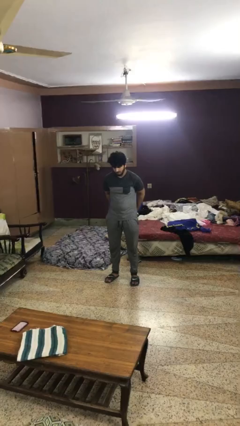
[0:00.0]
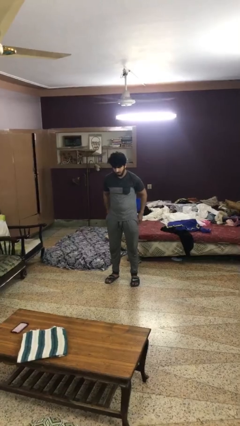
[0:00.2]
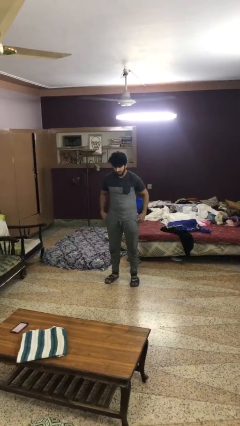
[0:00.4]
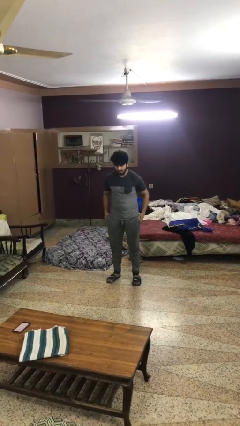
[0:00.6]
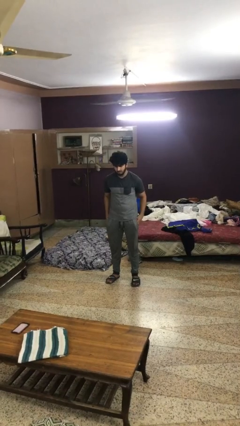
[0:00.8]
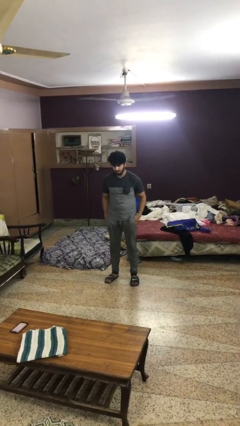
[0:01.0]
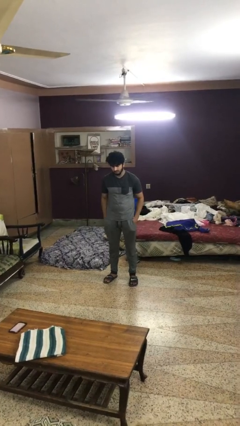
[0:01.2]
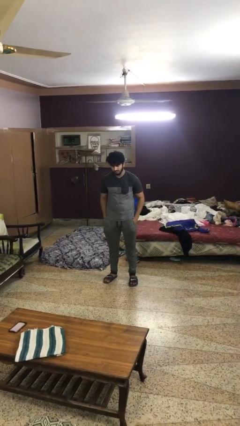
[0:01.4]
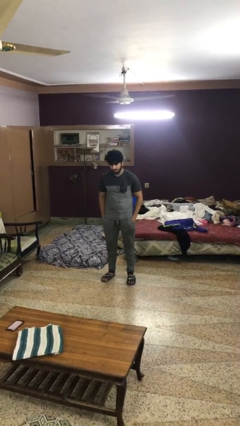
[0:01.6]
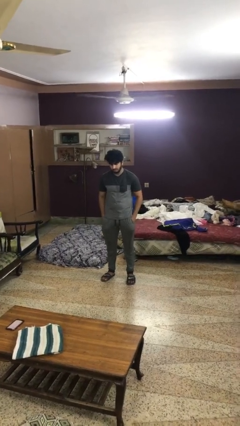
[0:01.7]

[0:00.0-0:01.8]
person puts hands in back pockets

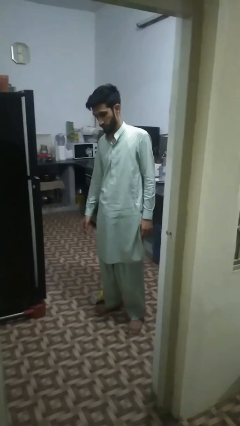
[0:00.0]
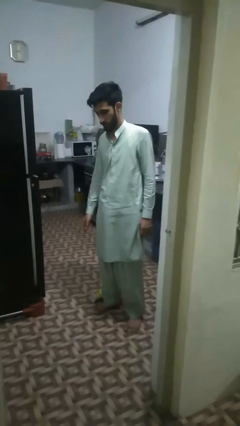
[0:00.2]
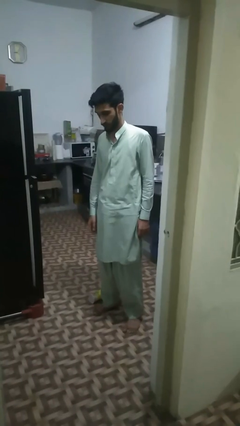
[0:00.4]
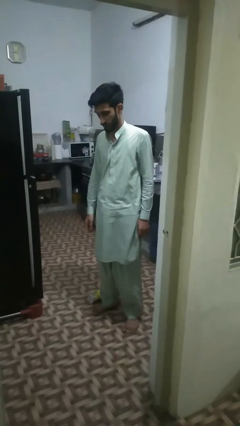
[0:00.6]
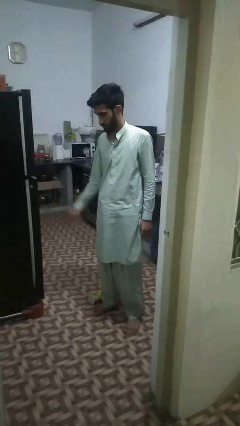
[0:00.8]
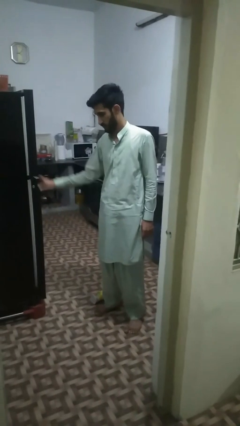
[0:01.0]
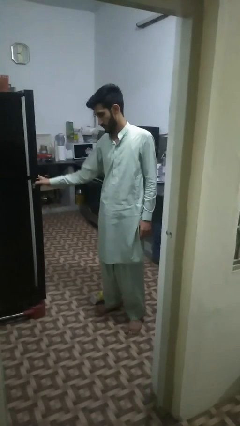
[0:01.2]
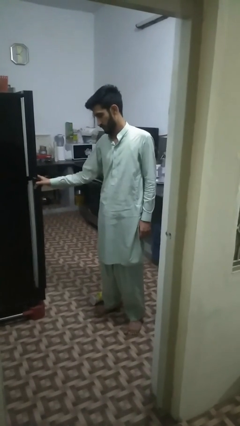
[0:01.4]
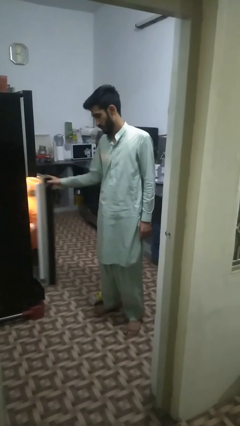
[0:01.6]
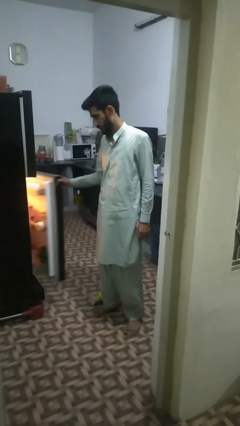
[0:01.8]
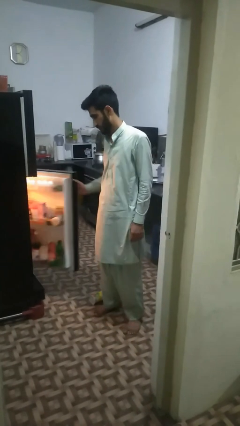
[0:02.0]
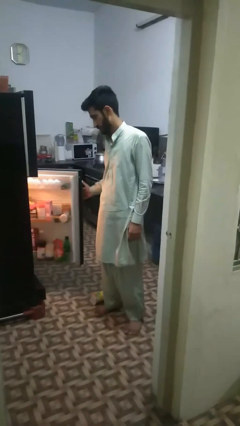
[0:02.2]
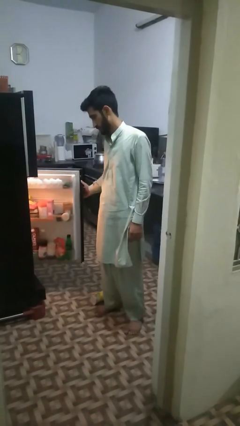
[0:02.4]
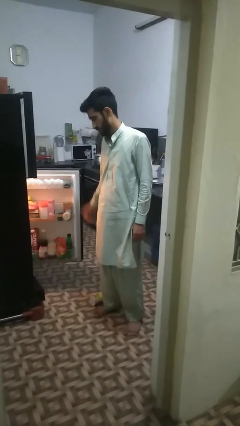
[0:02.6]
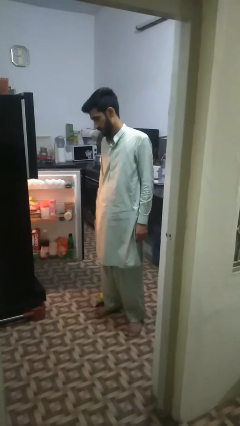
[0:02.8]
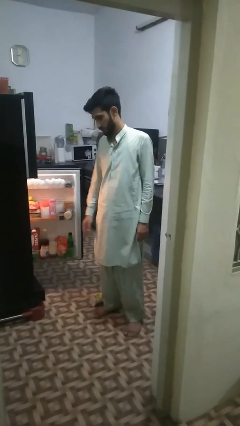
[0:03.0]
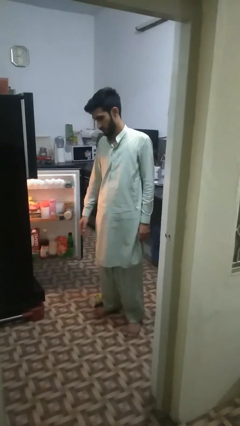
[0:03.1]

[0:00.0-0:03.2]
person opens refrigerator

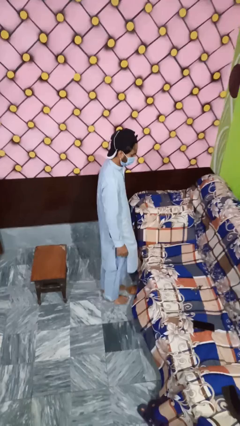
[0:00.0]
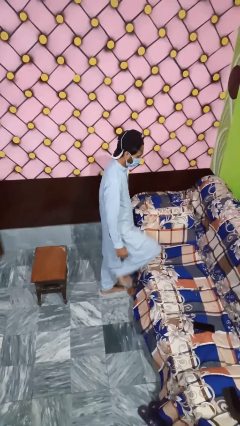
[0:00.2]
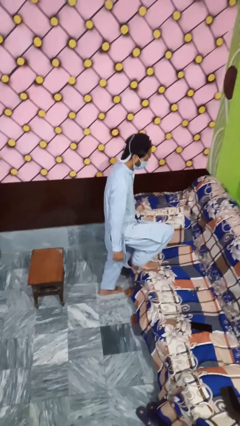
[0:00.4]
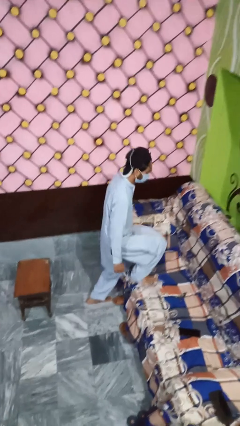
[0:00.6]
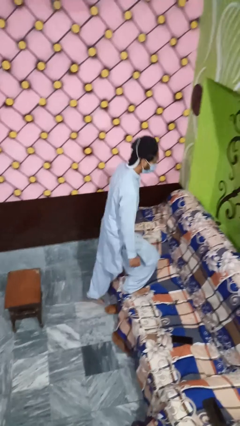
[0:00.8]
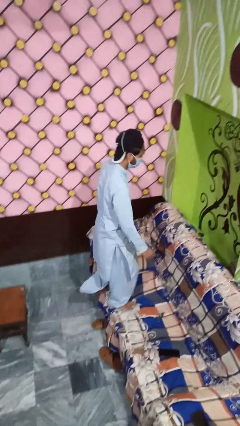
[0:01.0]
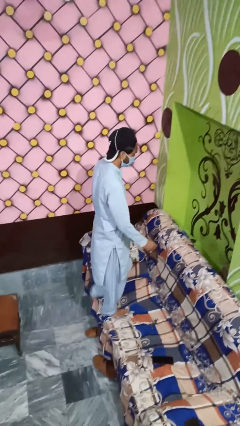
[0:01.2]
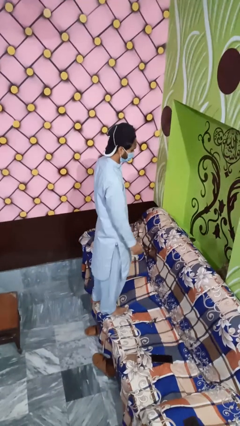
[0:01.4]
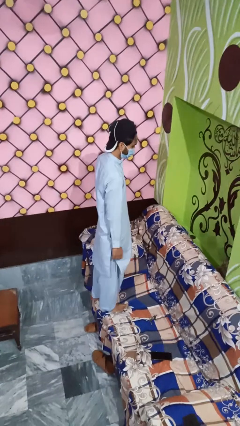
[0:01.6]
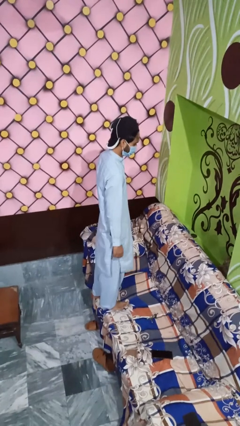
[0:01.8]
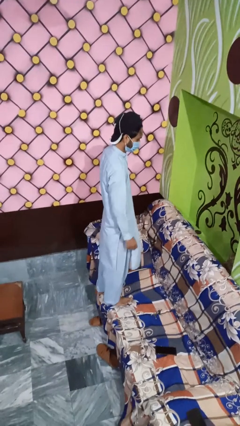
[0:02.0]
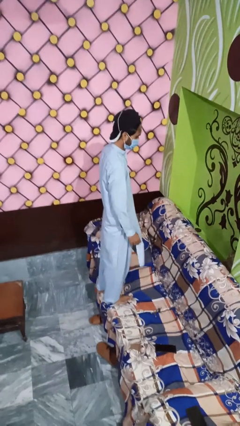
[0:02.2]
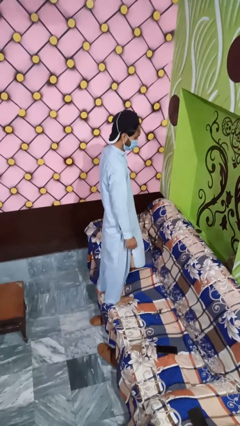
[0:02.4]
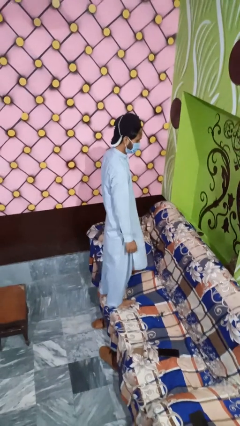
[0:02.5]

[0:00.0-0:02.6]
person climbs on couch

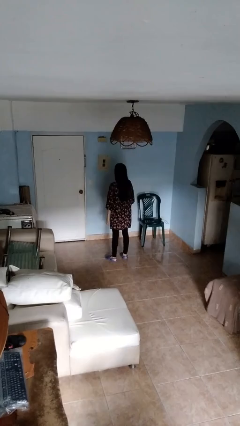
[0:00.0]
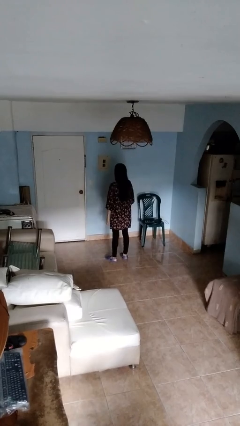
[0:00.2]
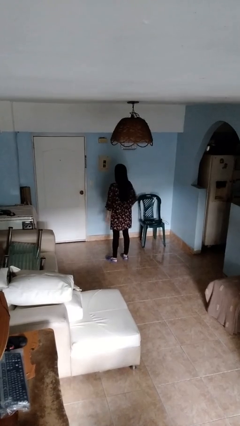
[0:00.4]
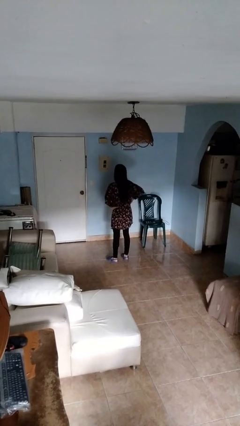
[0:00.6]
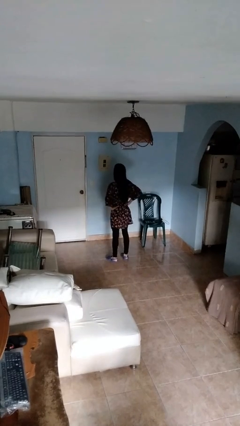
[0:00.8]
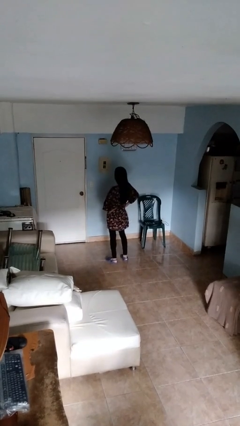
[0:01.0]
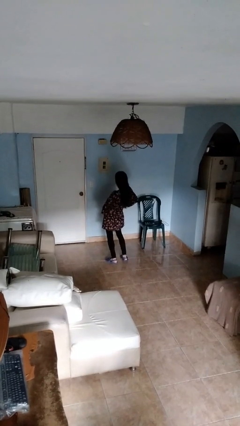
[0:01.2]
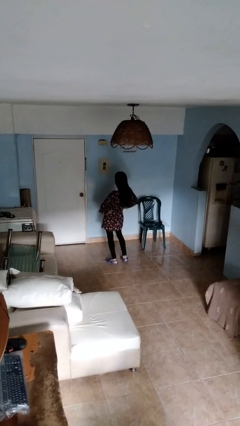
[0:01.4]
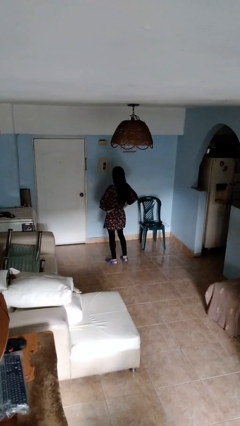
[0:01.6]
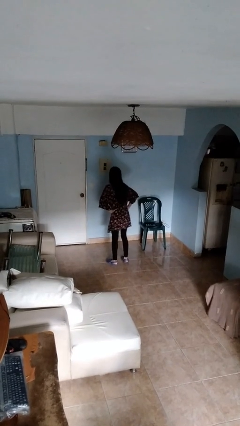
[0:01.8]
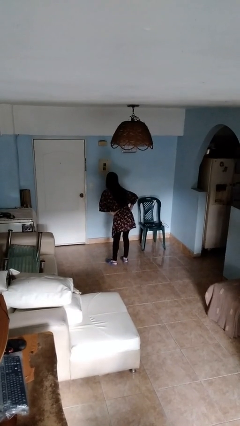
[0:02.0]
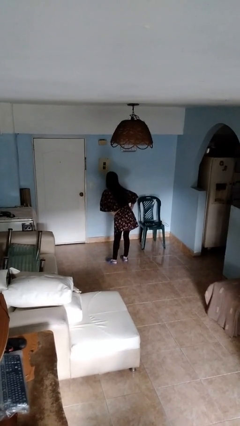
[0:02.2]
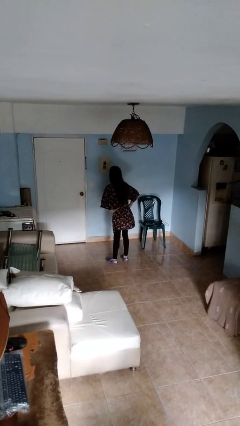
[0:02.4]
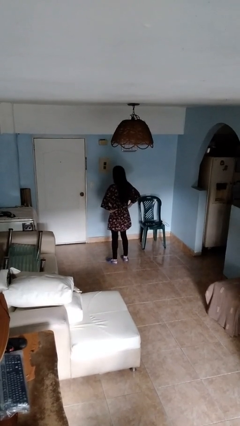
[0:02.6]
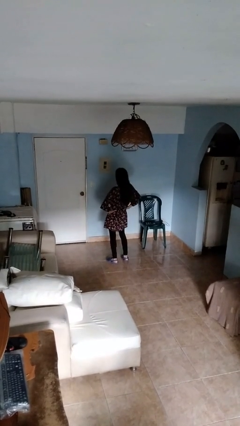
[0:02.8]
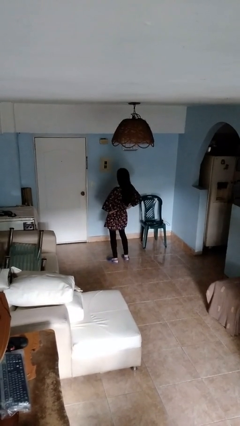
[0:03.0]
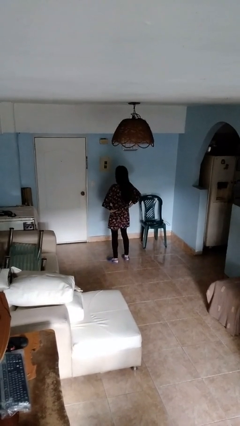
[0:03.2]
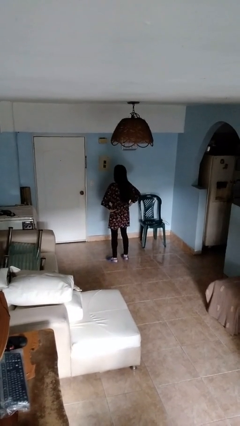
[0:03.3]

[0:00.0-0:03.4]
person wiggles hips

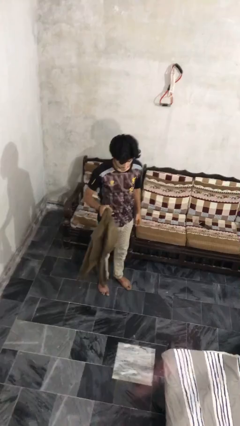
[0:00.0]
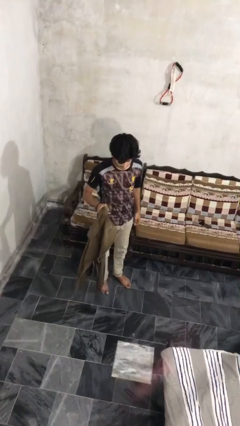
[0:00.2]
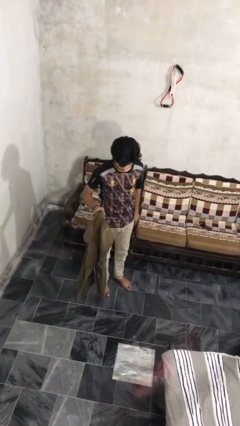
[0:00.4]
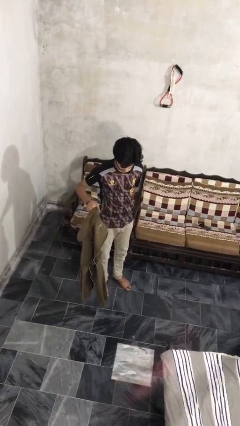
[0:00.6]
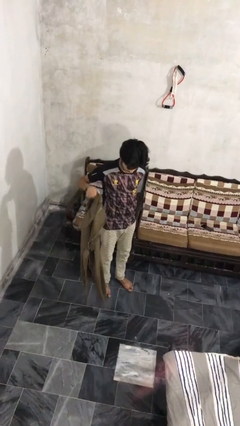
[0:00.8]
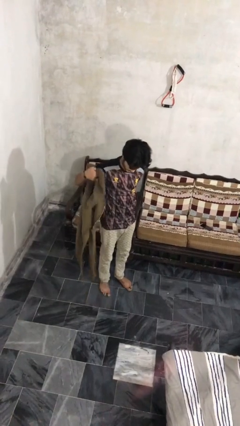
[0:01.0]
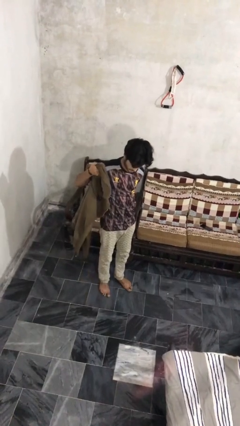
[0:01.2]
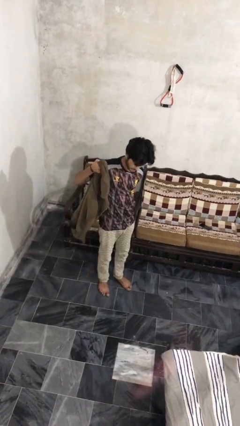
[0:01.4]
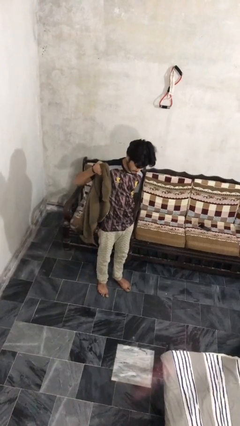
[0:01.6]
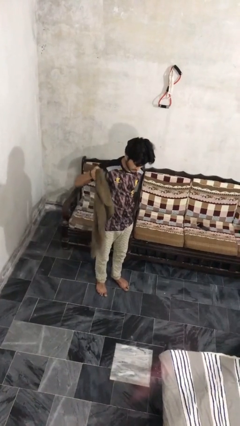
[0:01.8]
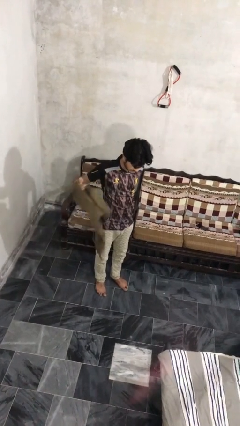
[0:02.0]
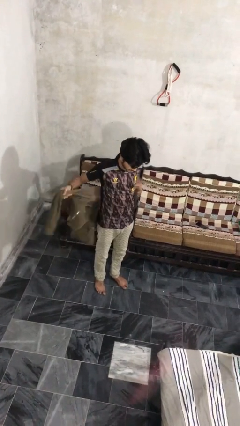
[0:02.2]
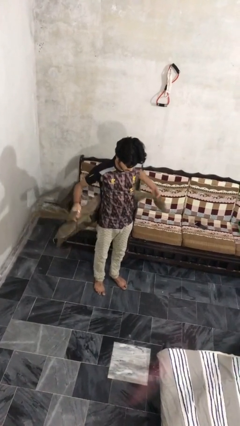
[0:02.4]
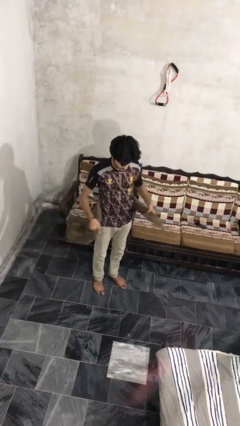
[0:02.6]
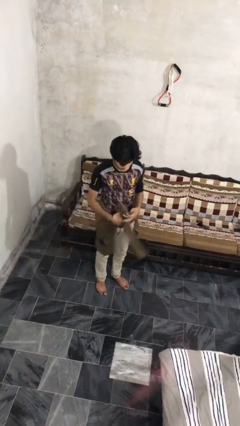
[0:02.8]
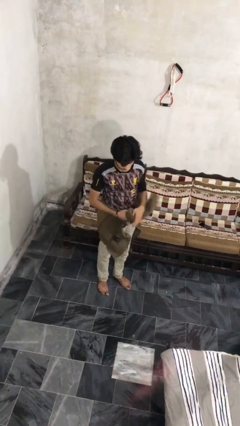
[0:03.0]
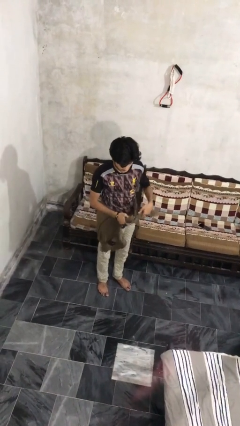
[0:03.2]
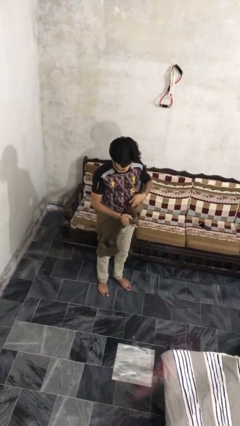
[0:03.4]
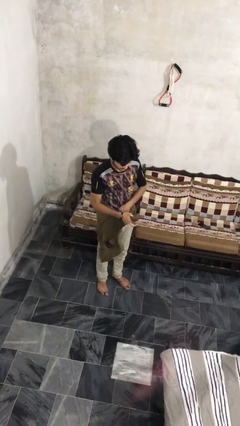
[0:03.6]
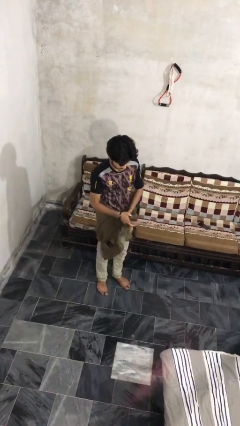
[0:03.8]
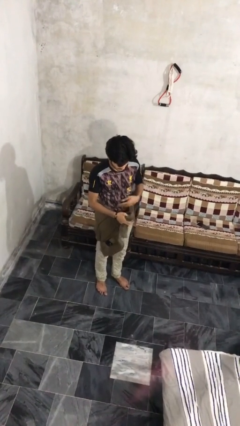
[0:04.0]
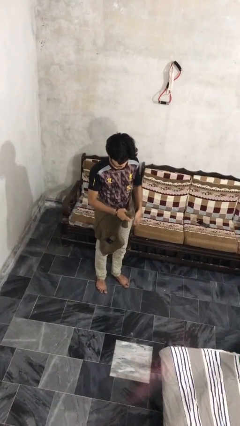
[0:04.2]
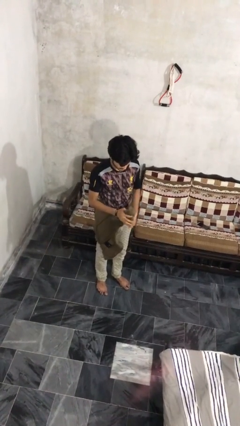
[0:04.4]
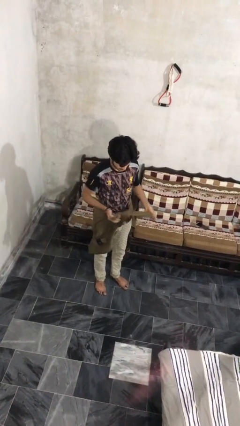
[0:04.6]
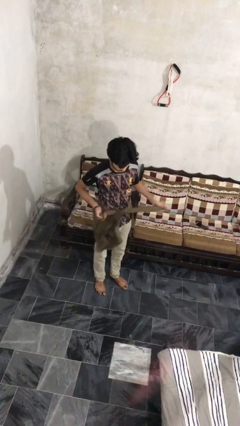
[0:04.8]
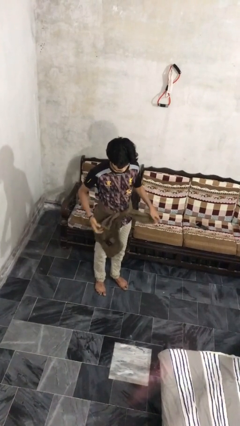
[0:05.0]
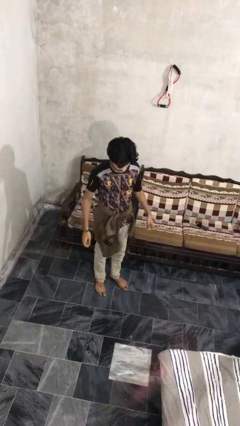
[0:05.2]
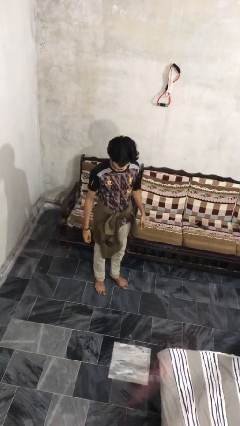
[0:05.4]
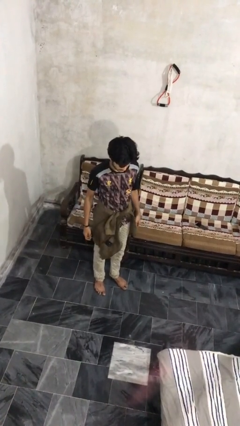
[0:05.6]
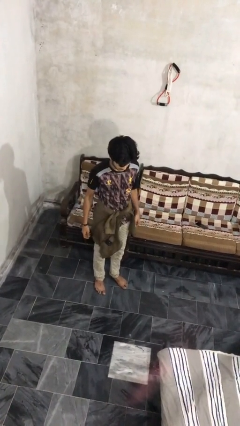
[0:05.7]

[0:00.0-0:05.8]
person ties jacket around waist

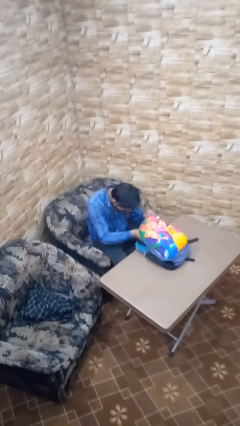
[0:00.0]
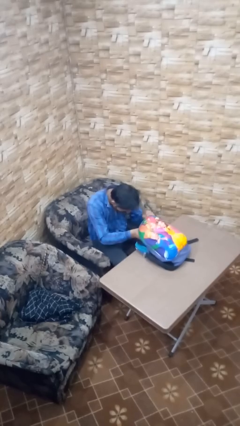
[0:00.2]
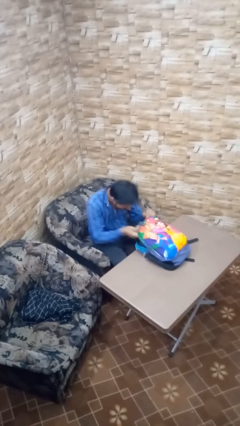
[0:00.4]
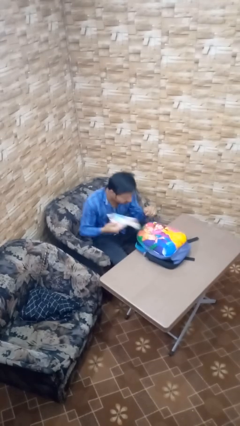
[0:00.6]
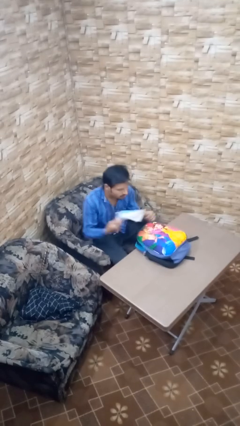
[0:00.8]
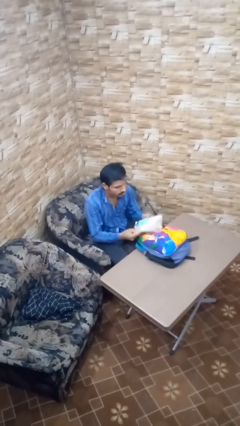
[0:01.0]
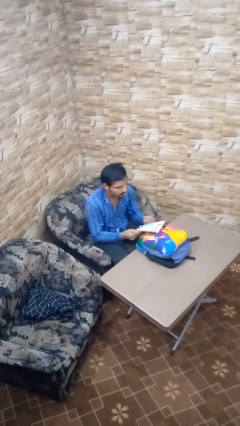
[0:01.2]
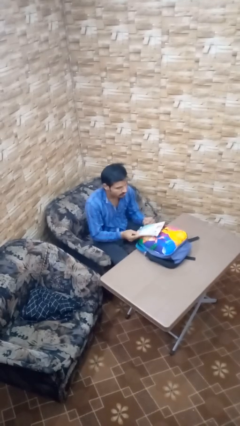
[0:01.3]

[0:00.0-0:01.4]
person takes object from backpack
